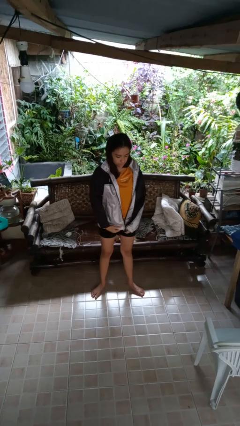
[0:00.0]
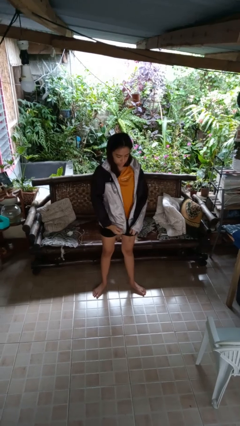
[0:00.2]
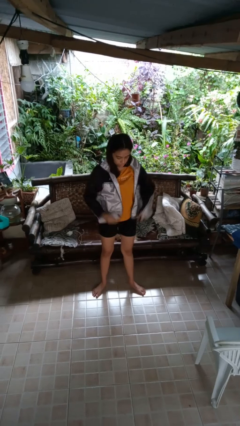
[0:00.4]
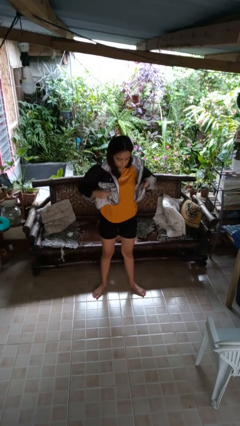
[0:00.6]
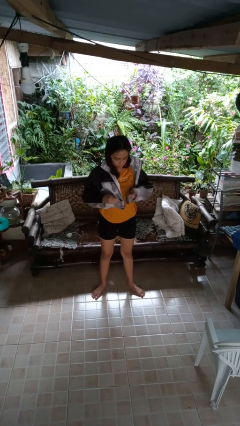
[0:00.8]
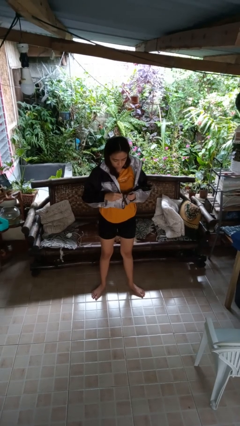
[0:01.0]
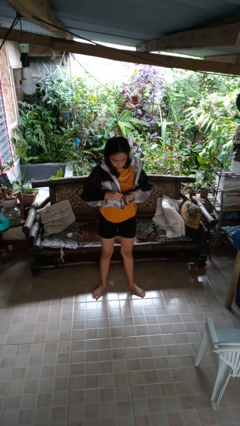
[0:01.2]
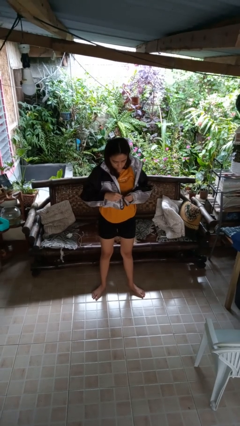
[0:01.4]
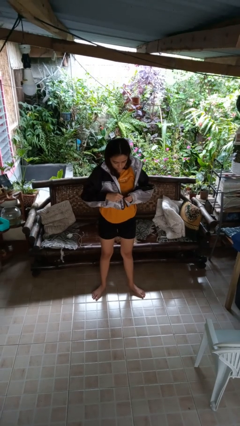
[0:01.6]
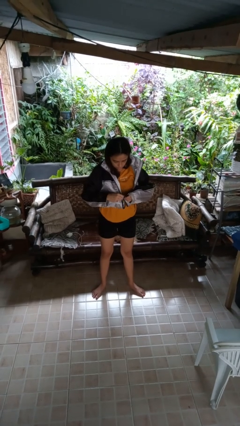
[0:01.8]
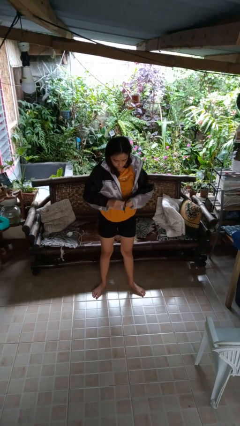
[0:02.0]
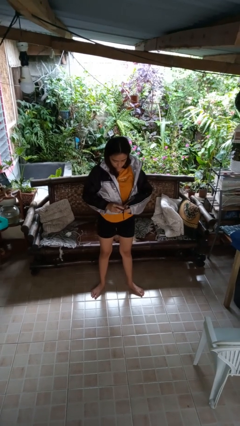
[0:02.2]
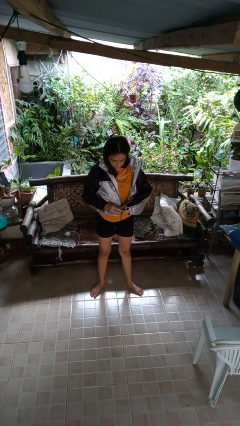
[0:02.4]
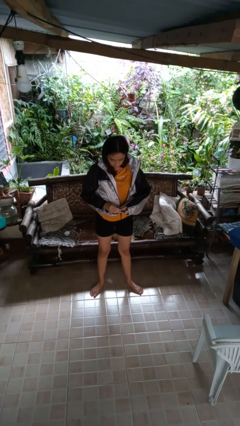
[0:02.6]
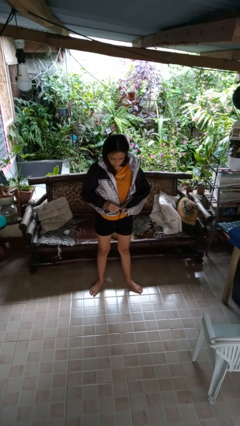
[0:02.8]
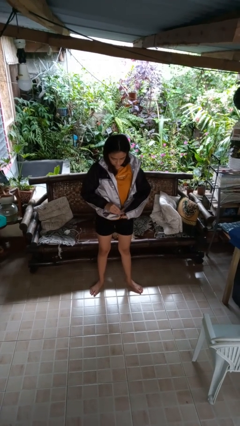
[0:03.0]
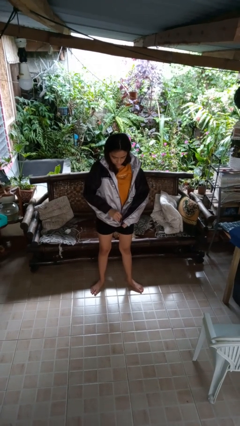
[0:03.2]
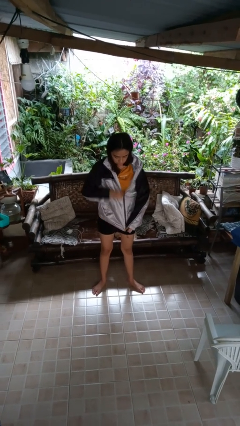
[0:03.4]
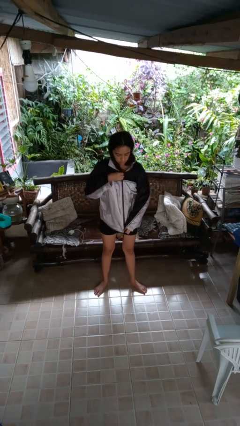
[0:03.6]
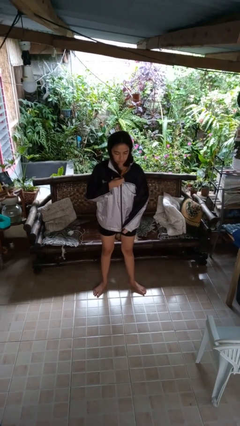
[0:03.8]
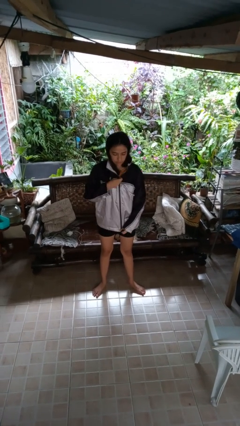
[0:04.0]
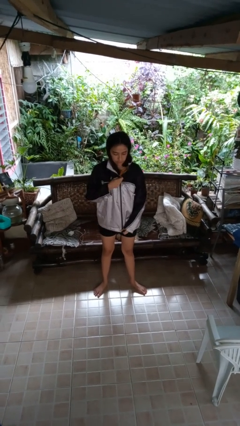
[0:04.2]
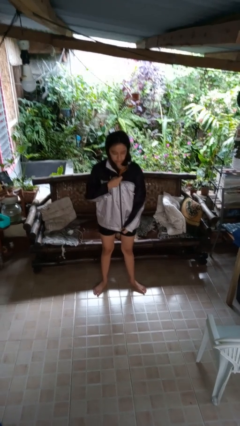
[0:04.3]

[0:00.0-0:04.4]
person zips up jacket

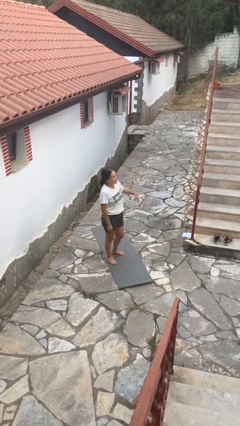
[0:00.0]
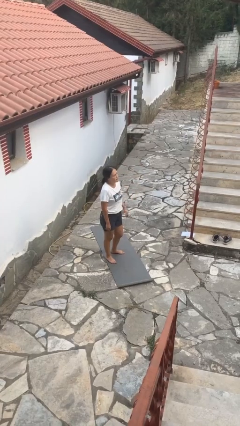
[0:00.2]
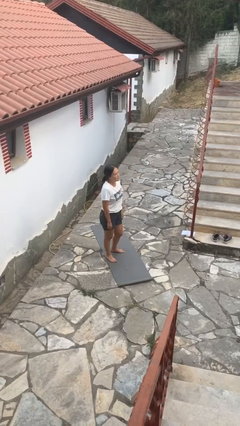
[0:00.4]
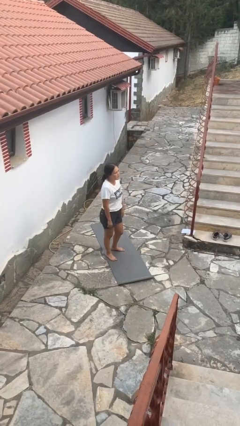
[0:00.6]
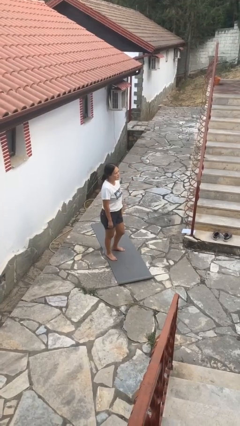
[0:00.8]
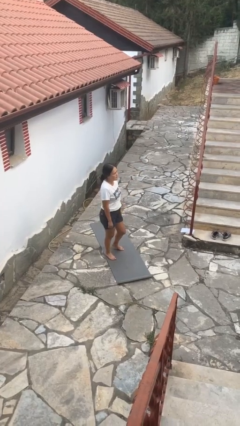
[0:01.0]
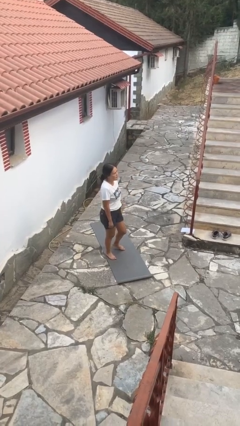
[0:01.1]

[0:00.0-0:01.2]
person gestures lower hand

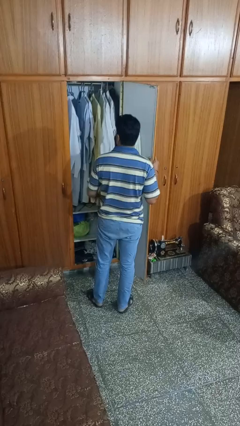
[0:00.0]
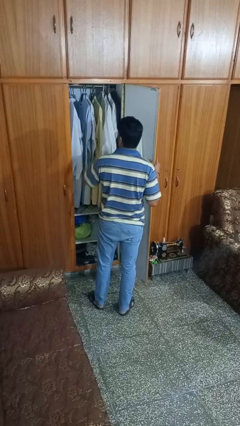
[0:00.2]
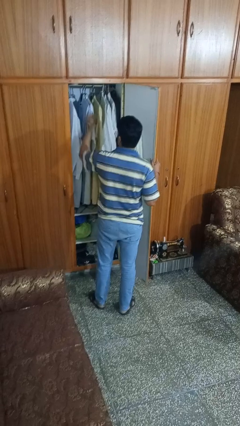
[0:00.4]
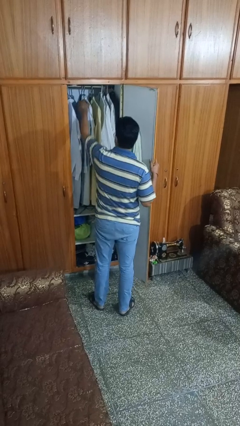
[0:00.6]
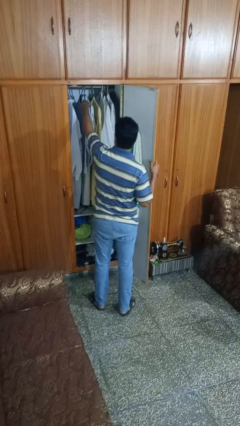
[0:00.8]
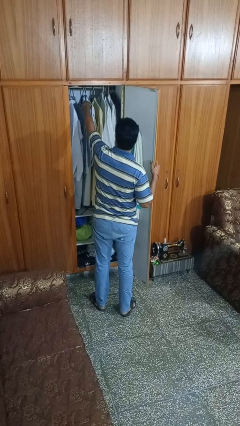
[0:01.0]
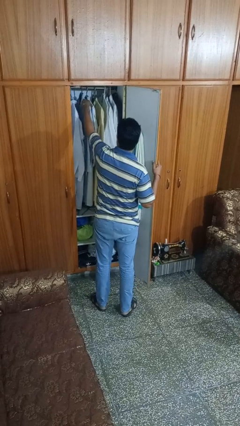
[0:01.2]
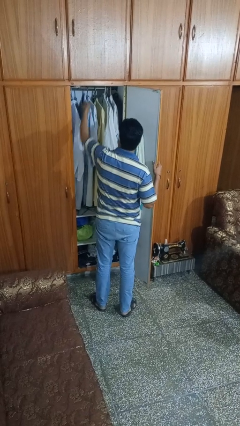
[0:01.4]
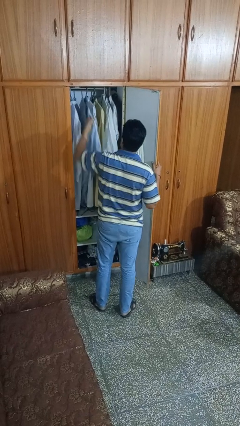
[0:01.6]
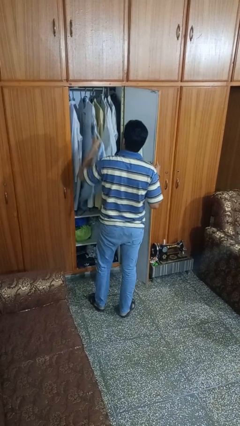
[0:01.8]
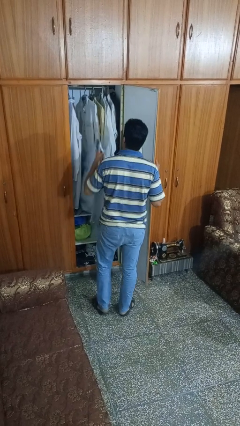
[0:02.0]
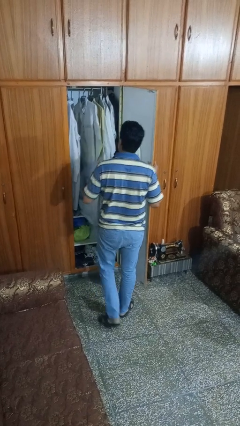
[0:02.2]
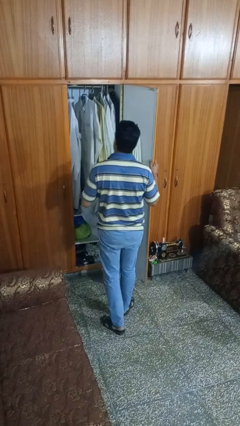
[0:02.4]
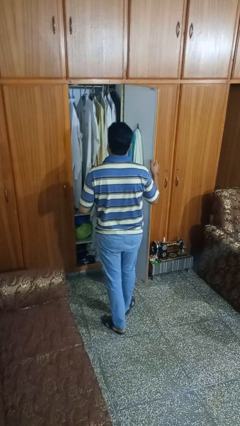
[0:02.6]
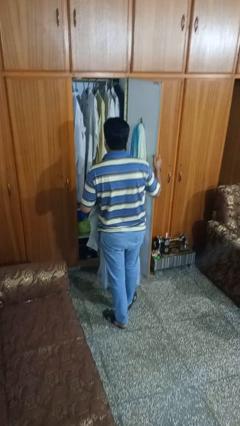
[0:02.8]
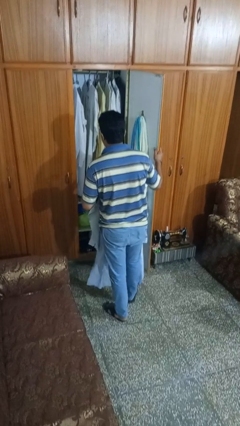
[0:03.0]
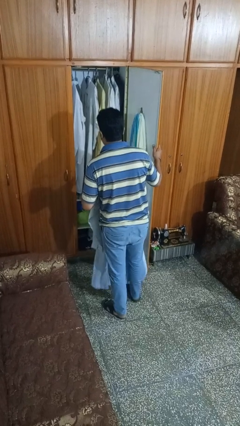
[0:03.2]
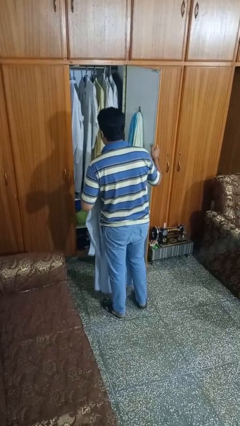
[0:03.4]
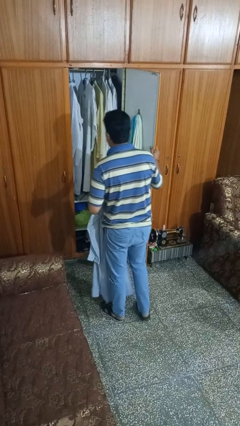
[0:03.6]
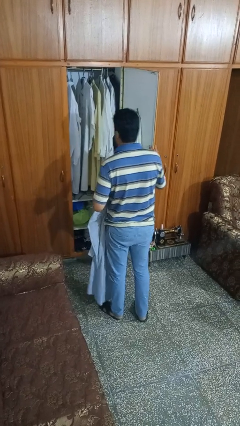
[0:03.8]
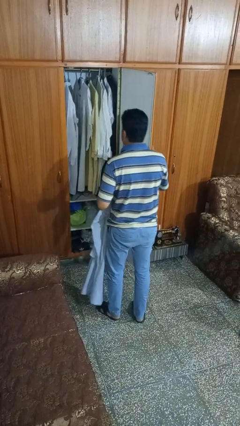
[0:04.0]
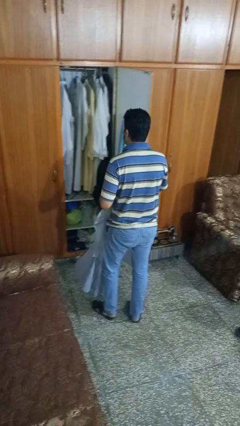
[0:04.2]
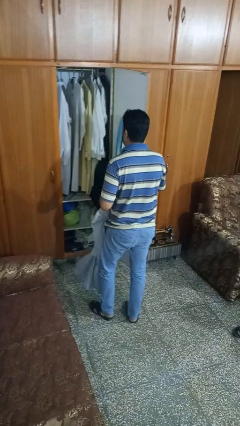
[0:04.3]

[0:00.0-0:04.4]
person takes clothes from dresser

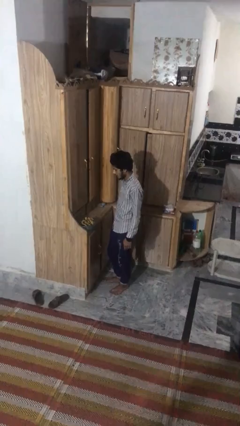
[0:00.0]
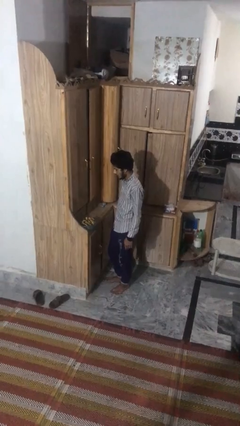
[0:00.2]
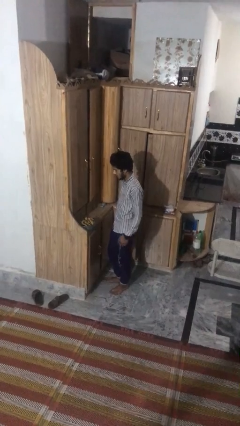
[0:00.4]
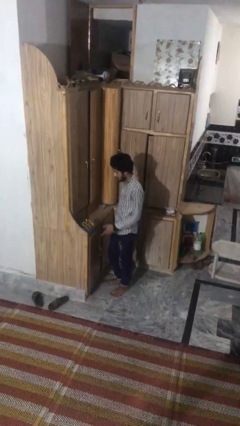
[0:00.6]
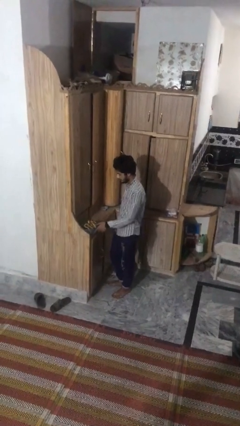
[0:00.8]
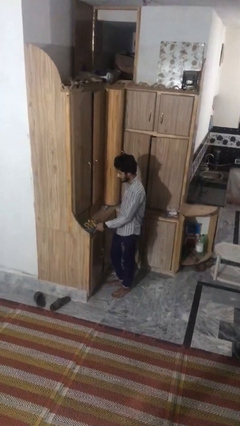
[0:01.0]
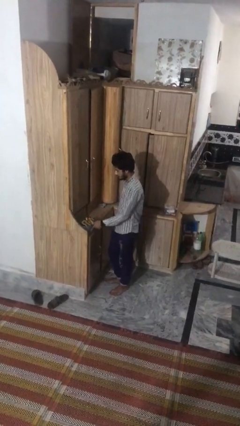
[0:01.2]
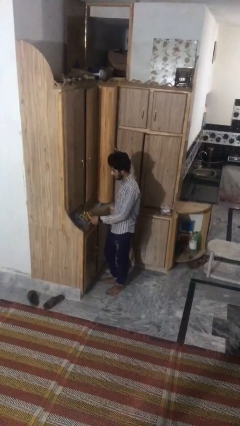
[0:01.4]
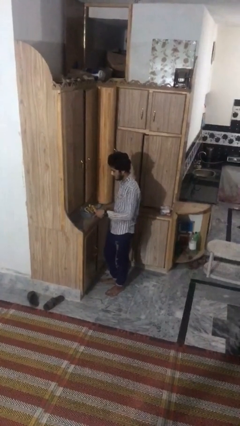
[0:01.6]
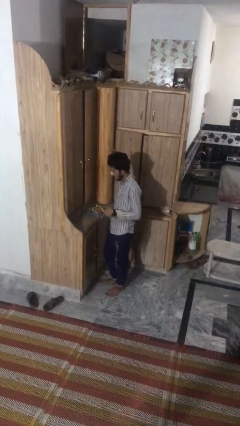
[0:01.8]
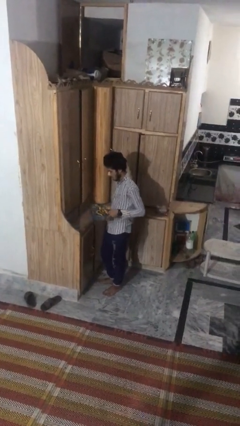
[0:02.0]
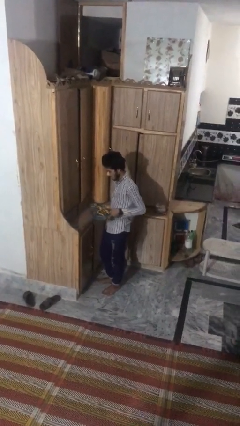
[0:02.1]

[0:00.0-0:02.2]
person picks up object from countertop

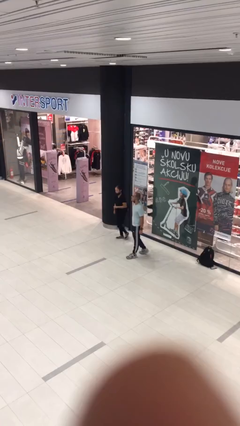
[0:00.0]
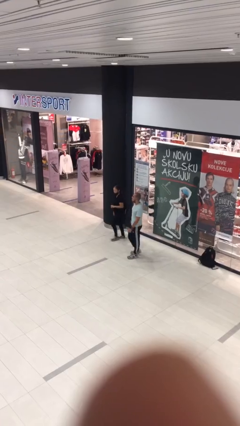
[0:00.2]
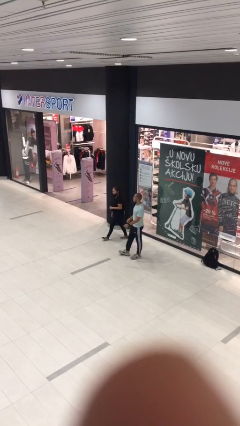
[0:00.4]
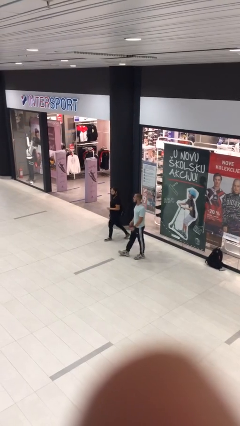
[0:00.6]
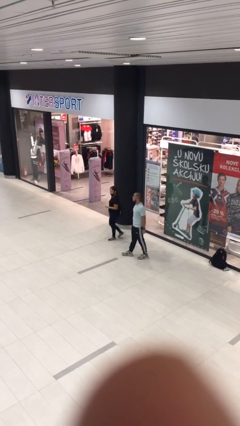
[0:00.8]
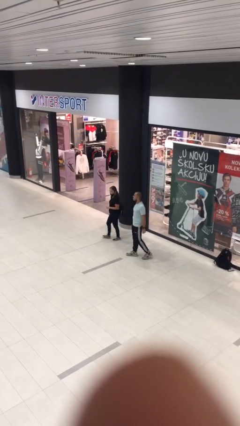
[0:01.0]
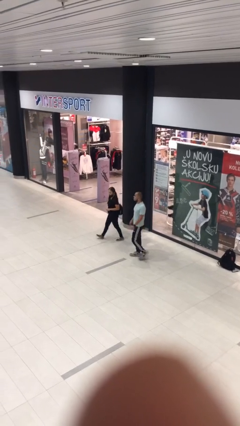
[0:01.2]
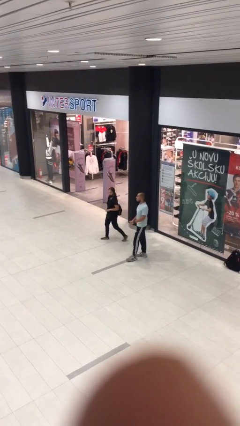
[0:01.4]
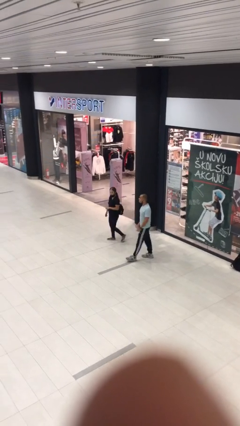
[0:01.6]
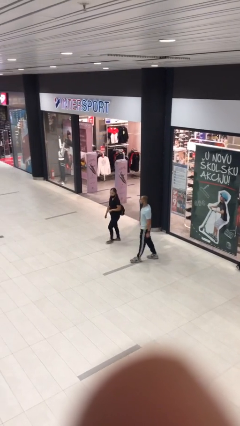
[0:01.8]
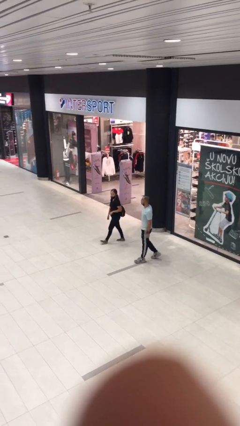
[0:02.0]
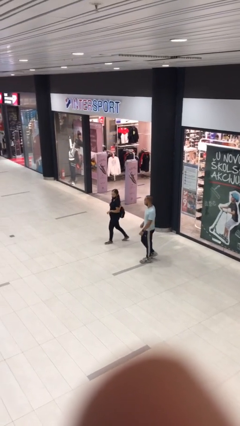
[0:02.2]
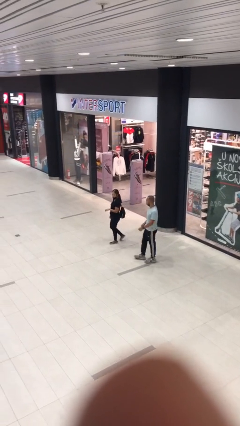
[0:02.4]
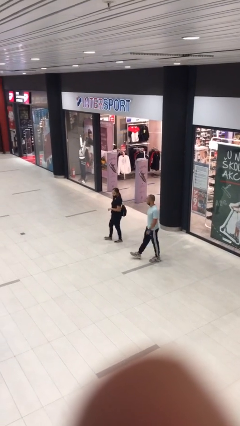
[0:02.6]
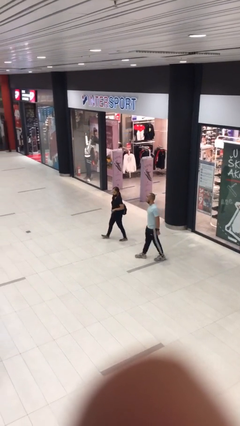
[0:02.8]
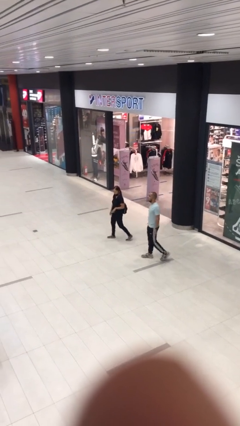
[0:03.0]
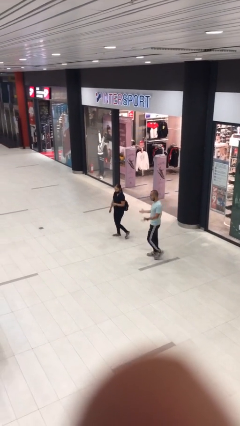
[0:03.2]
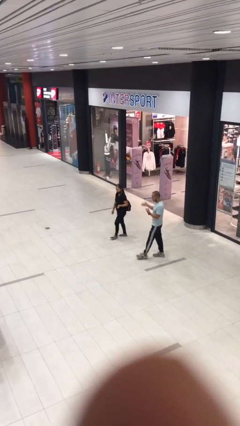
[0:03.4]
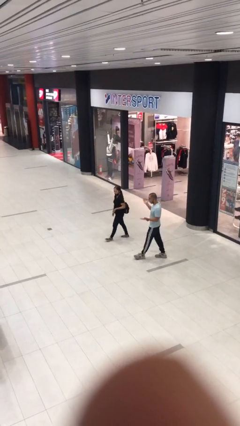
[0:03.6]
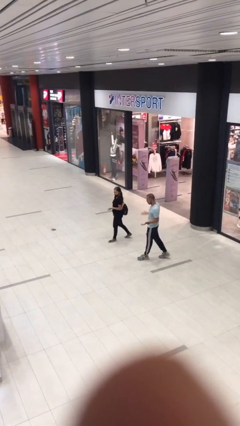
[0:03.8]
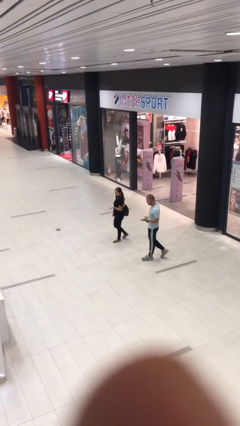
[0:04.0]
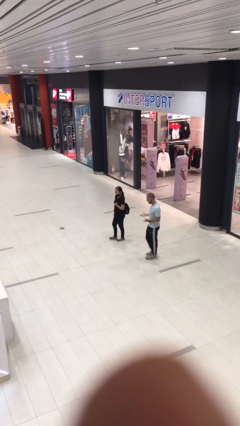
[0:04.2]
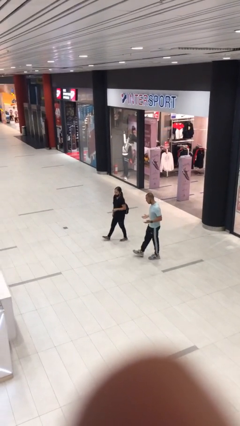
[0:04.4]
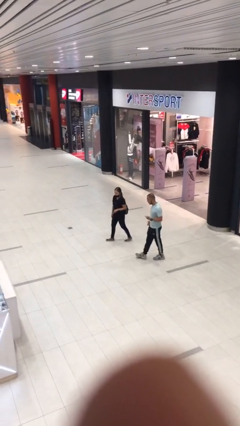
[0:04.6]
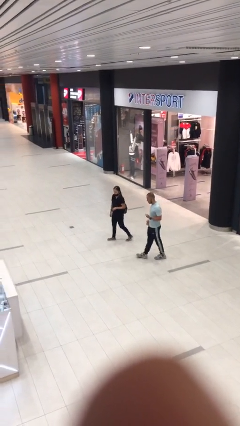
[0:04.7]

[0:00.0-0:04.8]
person talks to person

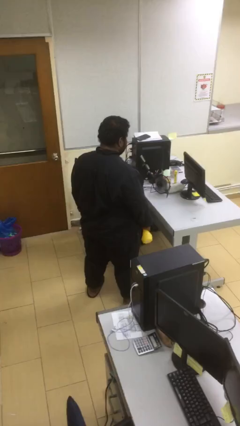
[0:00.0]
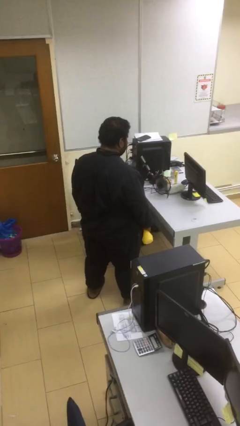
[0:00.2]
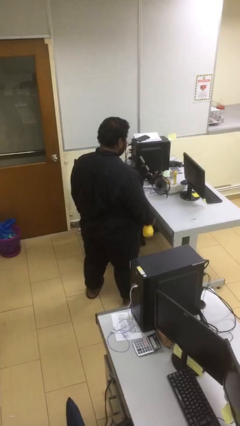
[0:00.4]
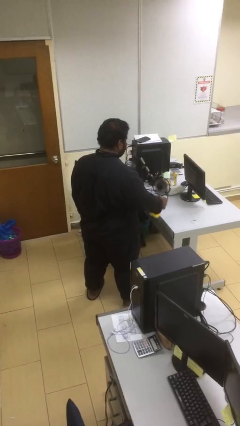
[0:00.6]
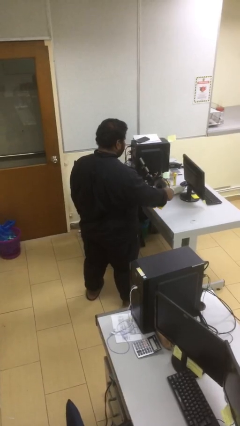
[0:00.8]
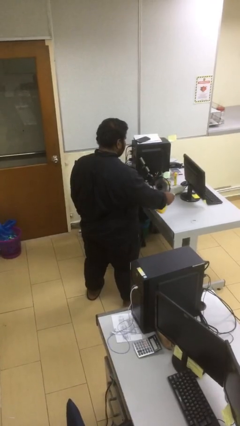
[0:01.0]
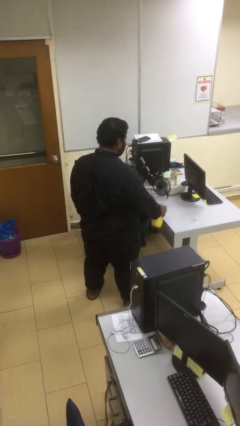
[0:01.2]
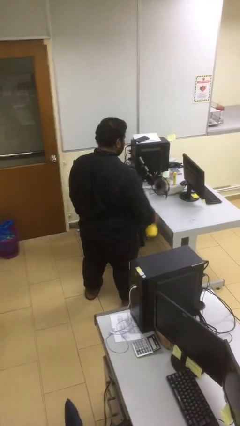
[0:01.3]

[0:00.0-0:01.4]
person sprays from bottle
